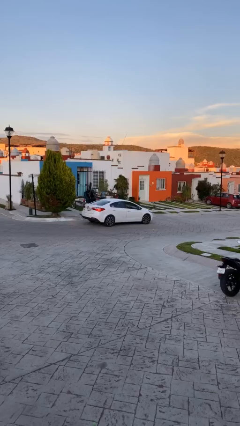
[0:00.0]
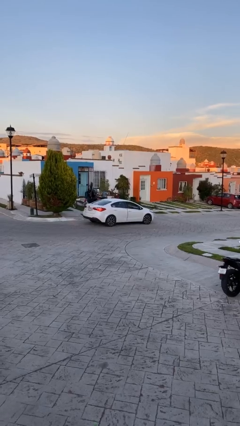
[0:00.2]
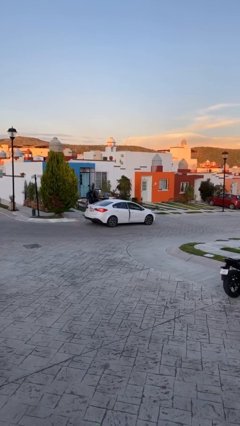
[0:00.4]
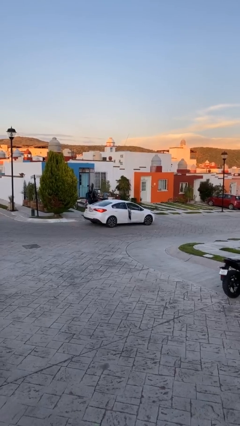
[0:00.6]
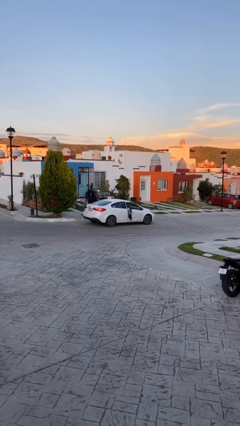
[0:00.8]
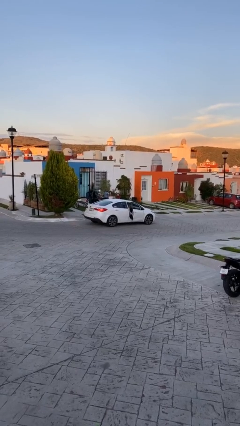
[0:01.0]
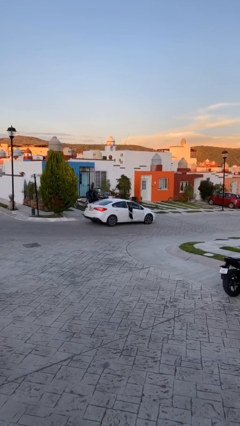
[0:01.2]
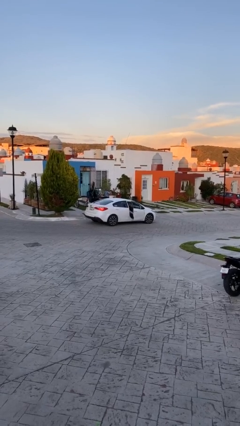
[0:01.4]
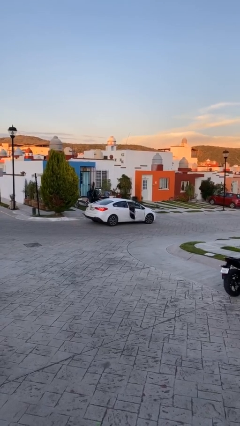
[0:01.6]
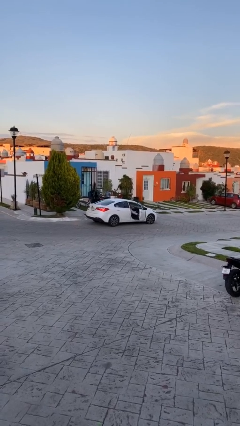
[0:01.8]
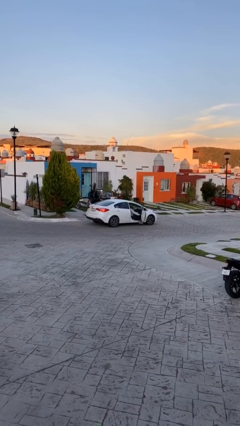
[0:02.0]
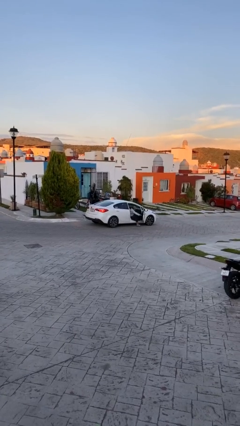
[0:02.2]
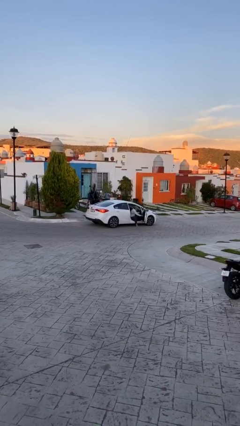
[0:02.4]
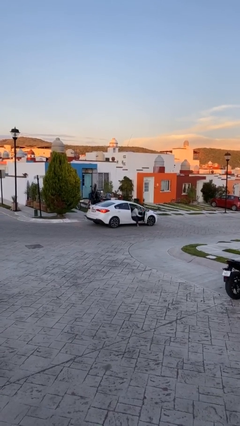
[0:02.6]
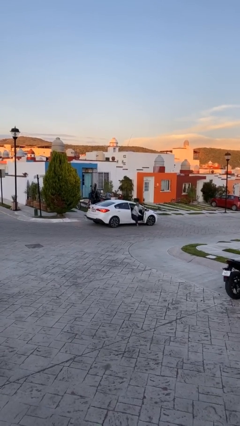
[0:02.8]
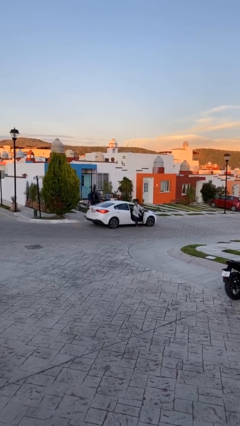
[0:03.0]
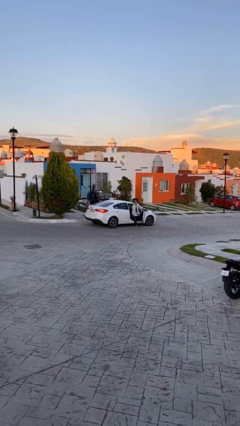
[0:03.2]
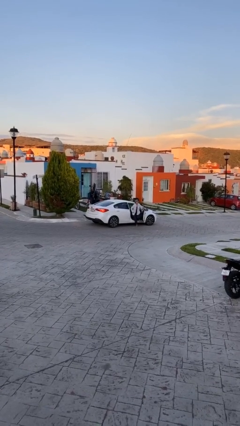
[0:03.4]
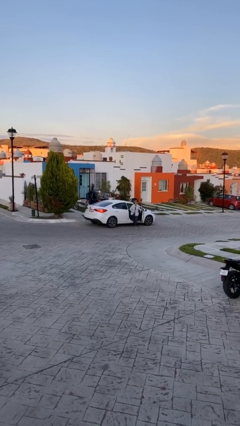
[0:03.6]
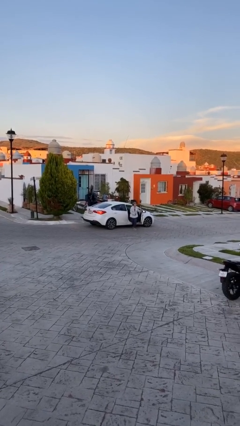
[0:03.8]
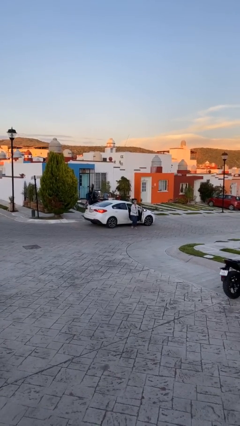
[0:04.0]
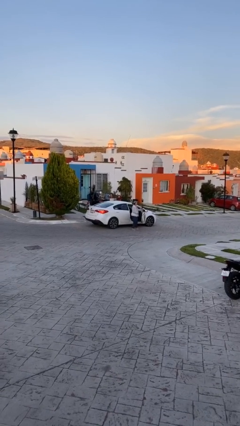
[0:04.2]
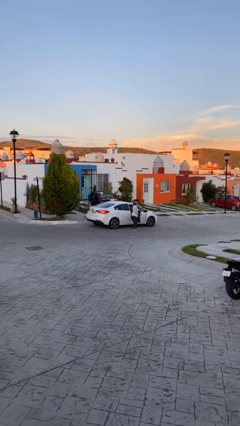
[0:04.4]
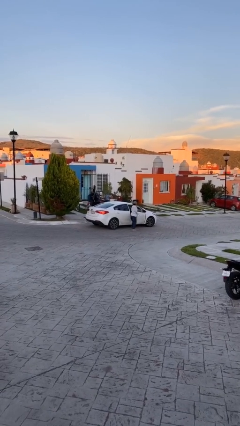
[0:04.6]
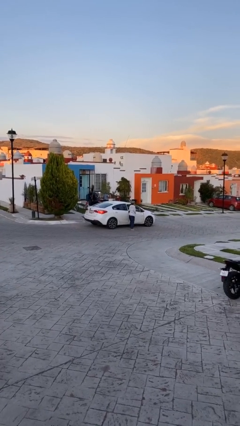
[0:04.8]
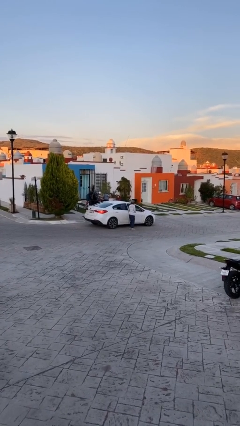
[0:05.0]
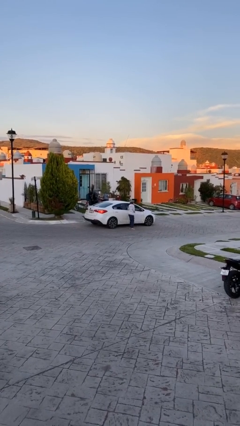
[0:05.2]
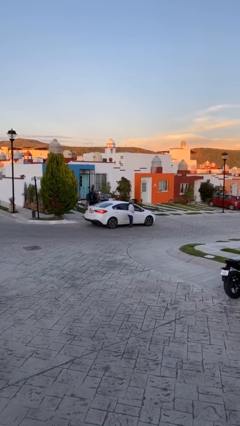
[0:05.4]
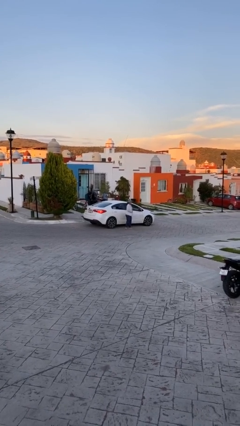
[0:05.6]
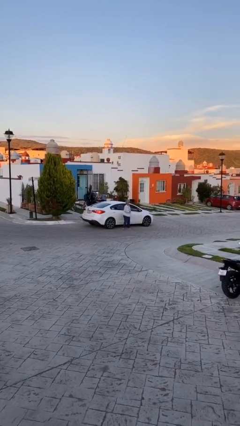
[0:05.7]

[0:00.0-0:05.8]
car drops off person

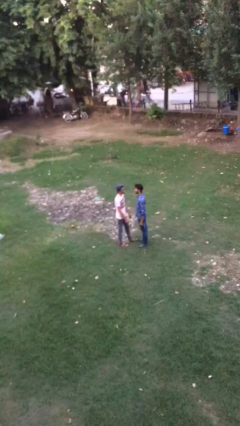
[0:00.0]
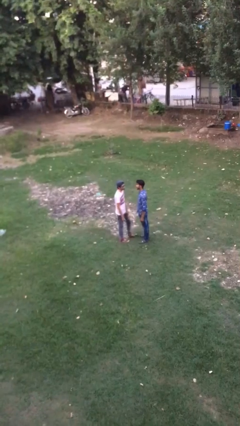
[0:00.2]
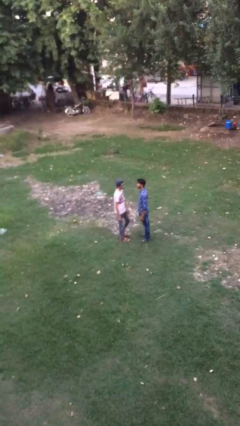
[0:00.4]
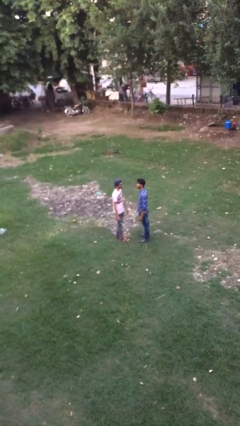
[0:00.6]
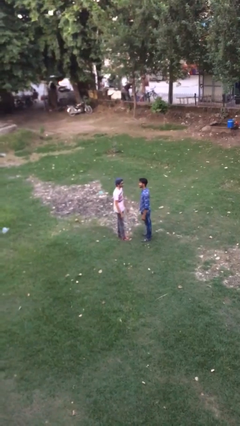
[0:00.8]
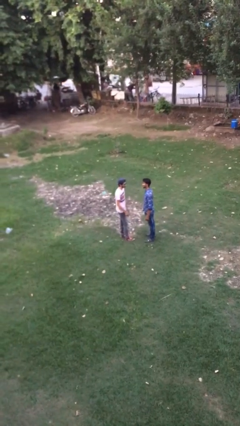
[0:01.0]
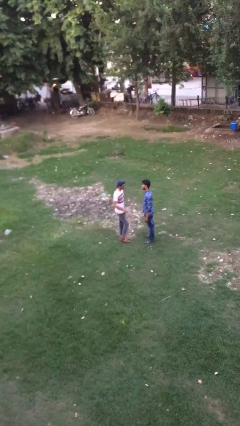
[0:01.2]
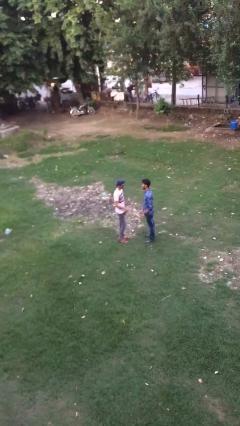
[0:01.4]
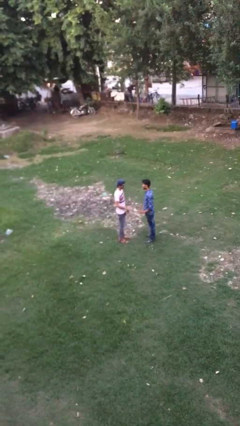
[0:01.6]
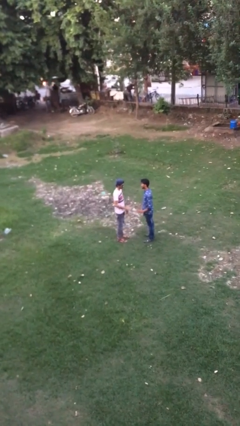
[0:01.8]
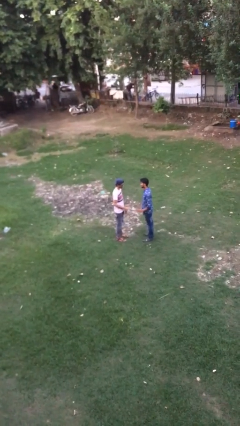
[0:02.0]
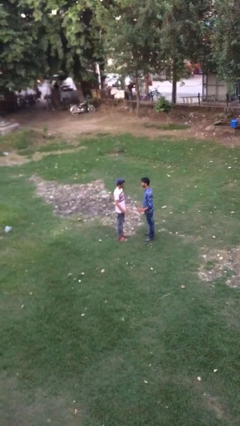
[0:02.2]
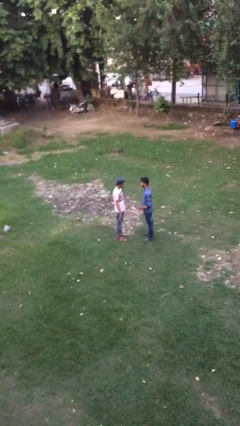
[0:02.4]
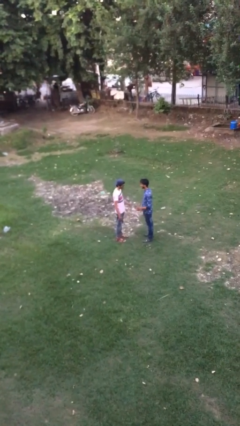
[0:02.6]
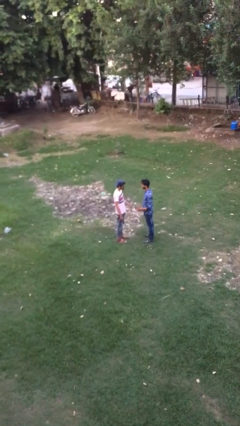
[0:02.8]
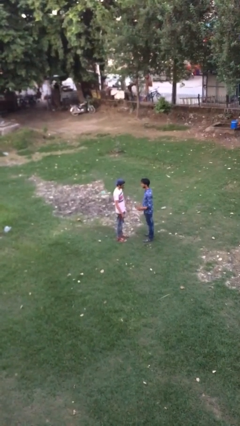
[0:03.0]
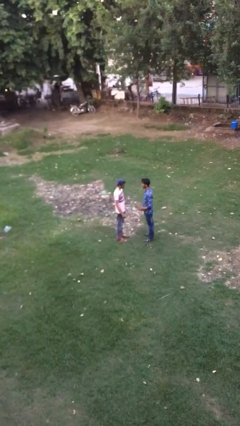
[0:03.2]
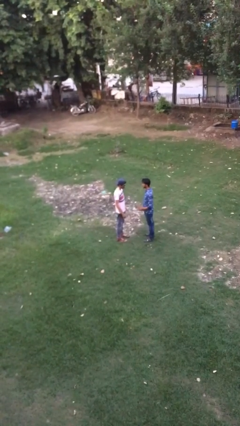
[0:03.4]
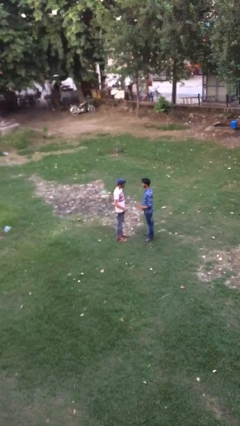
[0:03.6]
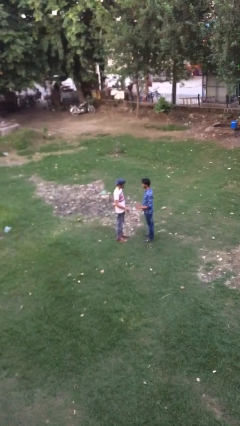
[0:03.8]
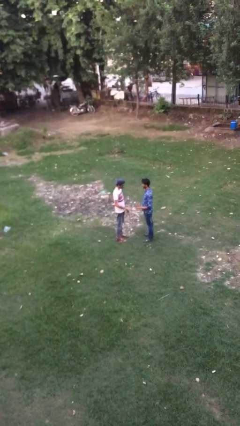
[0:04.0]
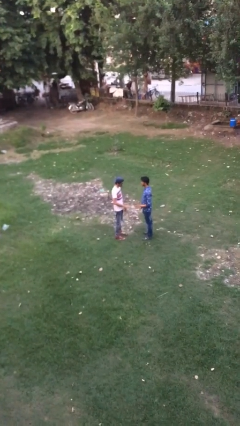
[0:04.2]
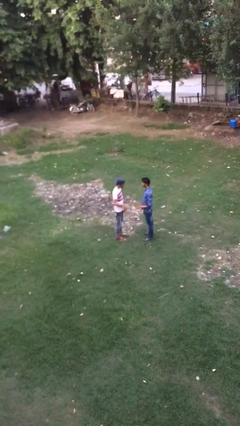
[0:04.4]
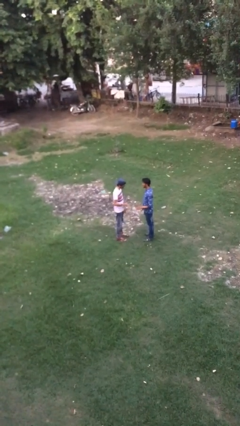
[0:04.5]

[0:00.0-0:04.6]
person talks to person

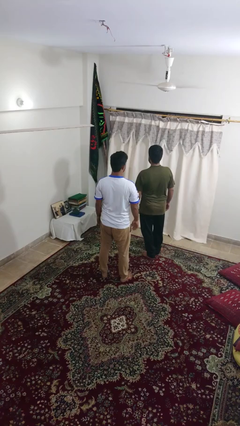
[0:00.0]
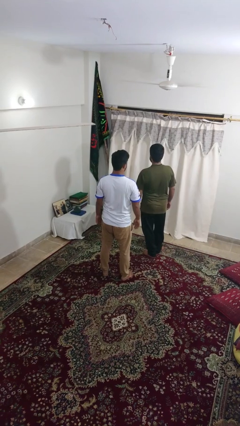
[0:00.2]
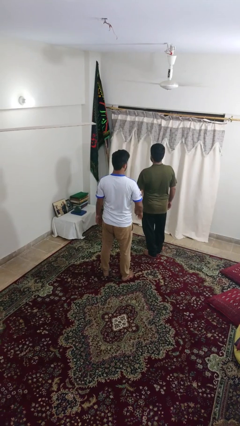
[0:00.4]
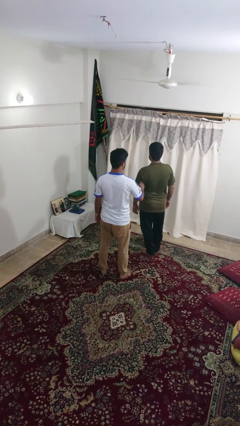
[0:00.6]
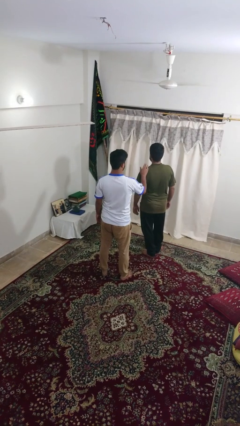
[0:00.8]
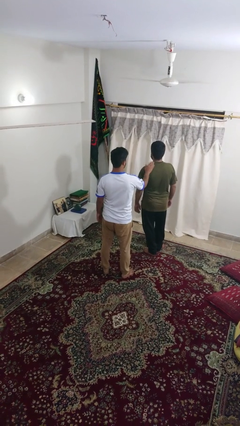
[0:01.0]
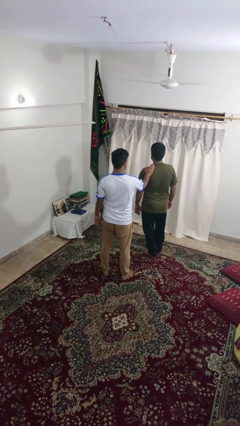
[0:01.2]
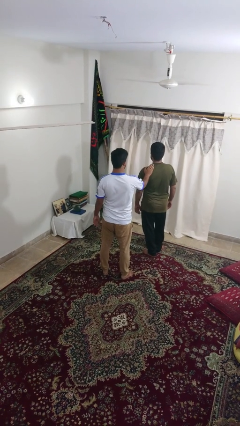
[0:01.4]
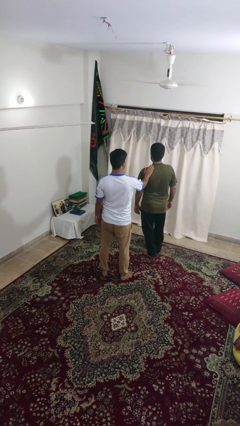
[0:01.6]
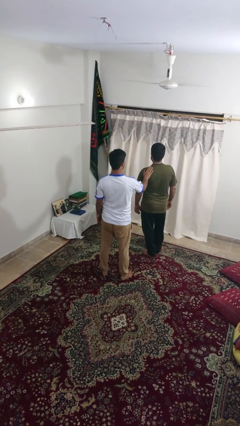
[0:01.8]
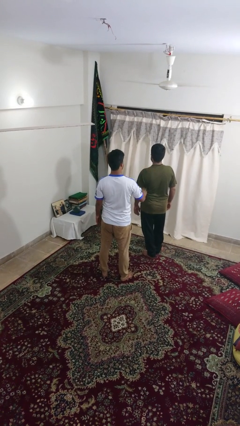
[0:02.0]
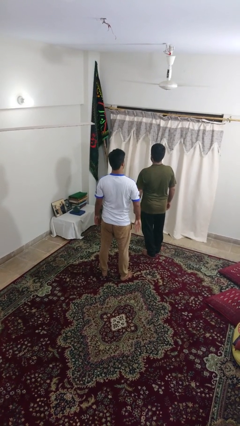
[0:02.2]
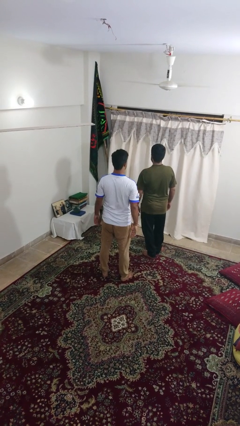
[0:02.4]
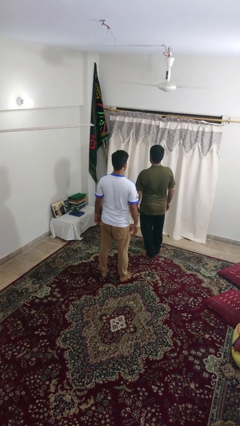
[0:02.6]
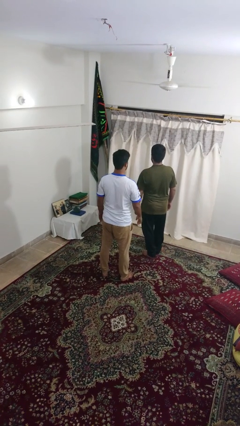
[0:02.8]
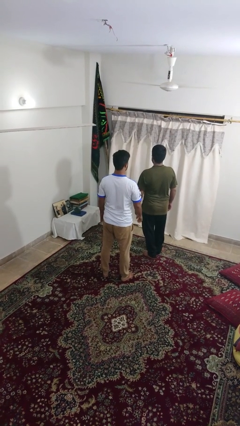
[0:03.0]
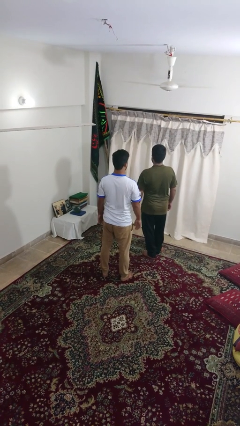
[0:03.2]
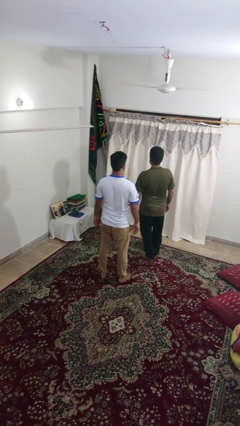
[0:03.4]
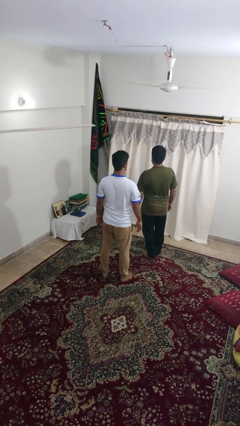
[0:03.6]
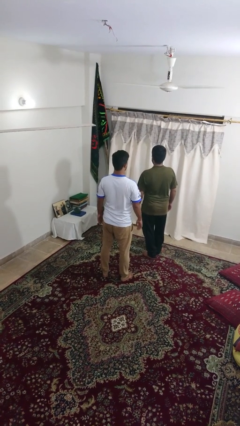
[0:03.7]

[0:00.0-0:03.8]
person touches back of person

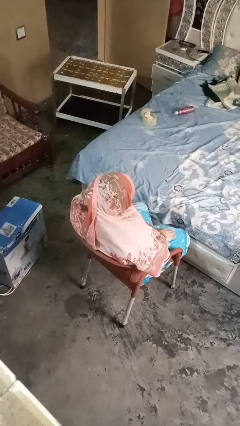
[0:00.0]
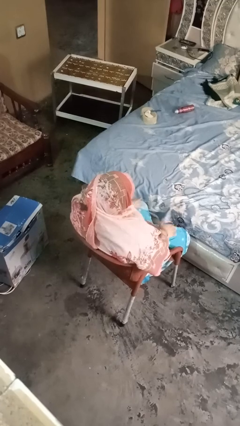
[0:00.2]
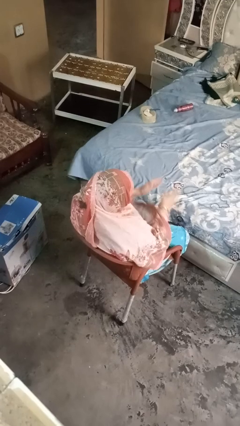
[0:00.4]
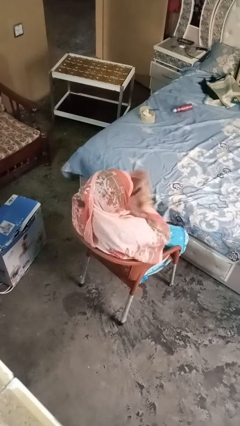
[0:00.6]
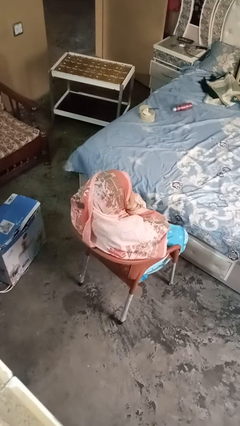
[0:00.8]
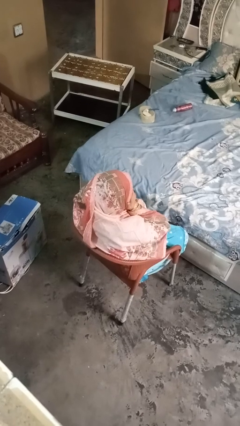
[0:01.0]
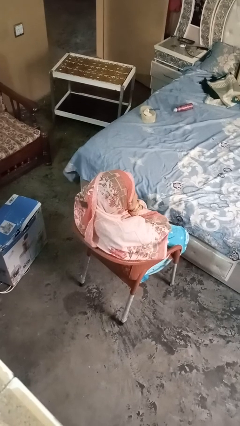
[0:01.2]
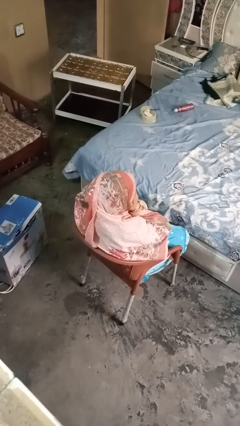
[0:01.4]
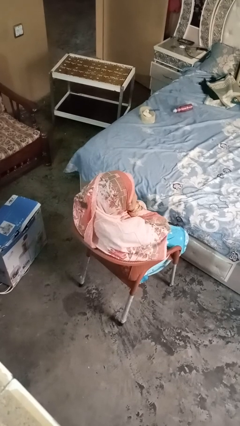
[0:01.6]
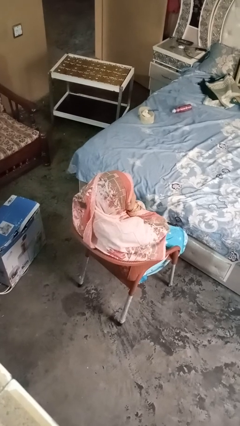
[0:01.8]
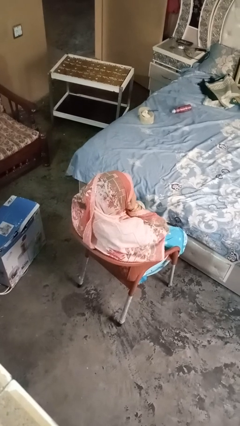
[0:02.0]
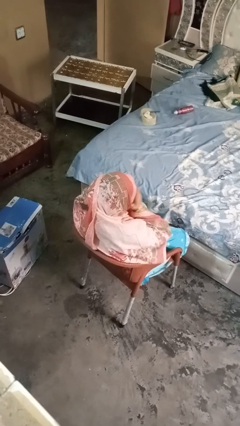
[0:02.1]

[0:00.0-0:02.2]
person covers face with hands

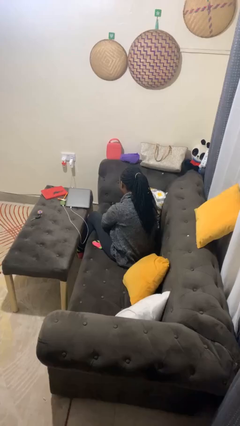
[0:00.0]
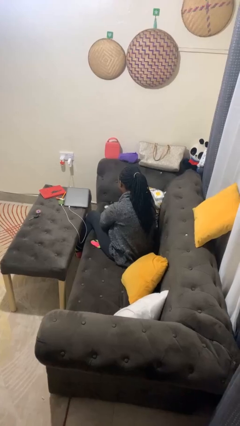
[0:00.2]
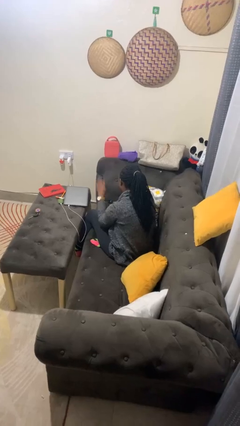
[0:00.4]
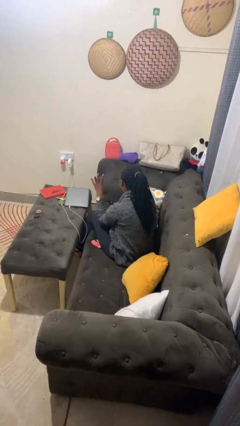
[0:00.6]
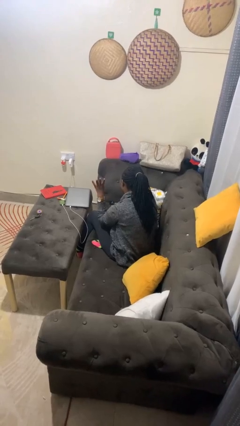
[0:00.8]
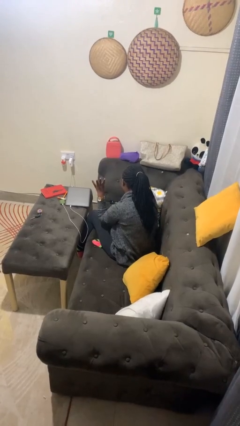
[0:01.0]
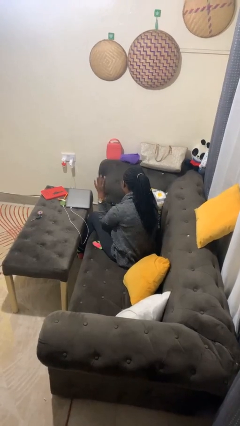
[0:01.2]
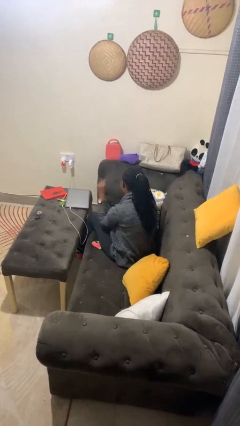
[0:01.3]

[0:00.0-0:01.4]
person gestures number four
